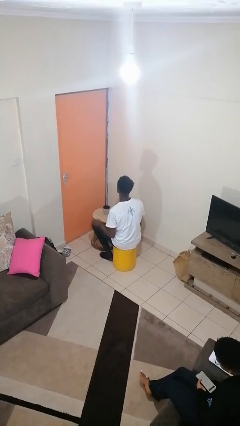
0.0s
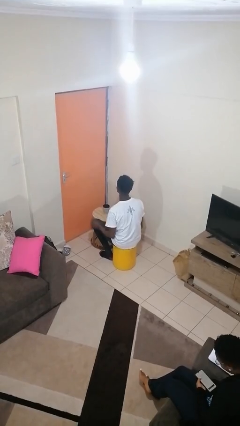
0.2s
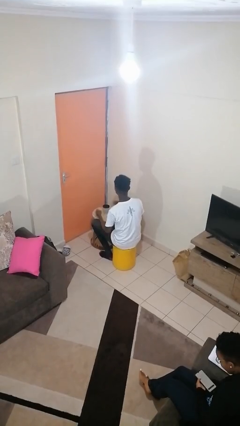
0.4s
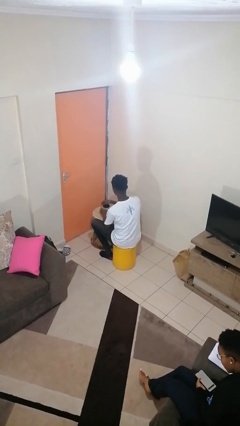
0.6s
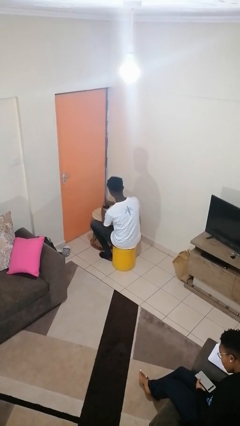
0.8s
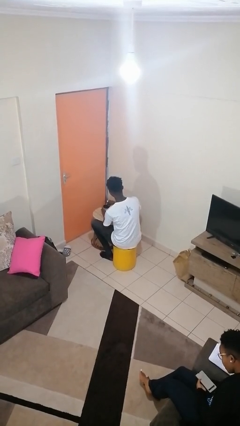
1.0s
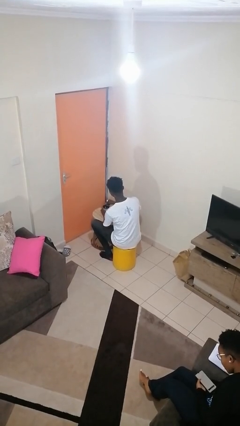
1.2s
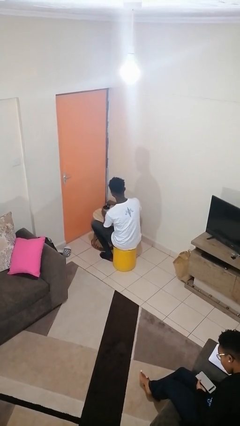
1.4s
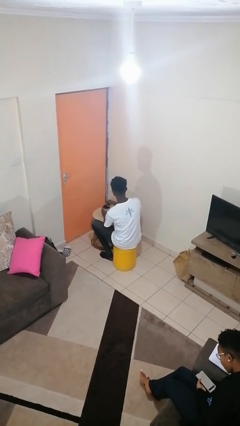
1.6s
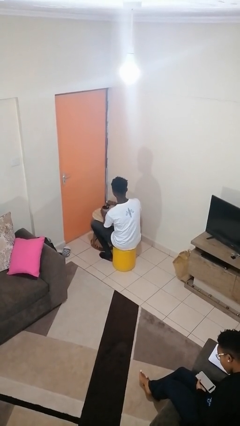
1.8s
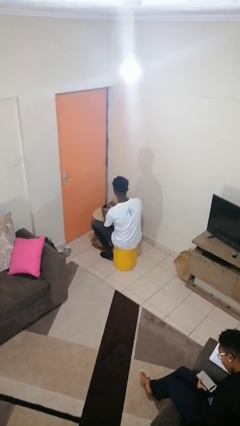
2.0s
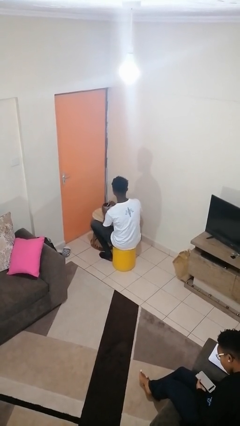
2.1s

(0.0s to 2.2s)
person stirs mug

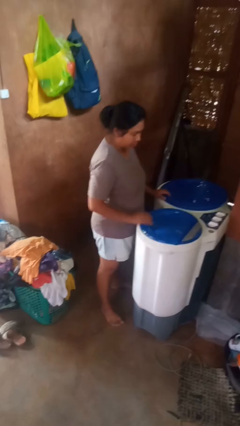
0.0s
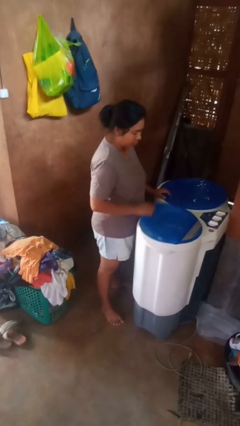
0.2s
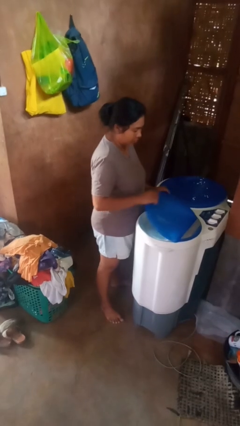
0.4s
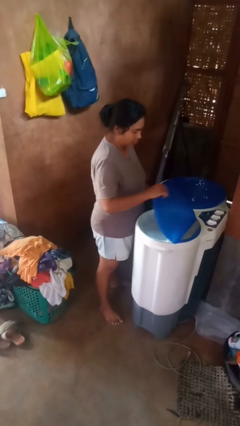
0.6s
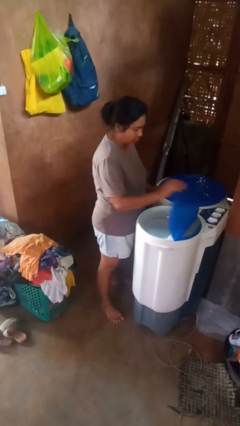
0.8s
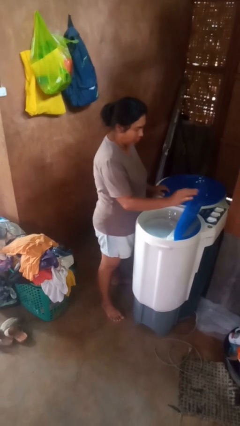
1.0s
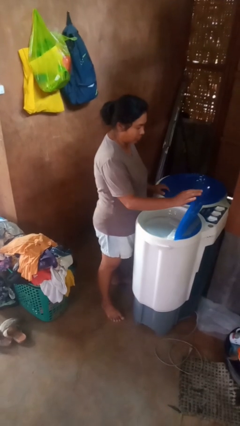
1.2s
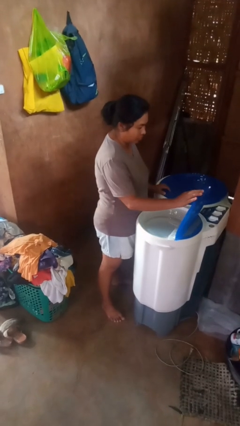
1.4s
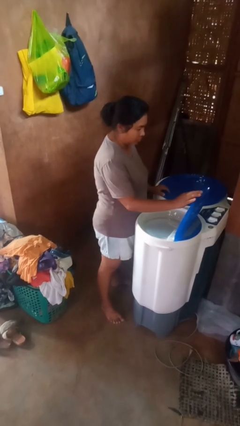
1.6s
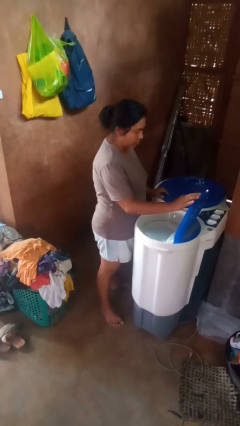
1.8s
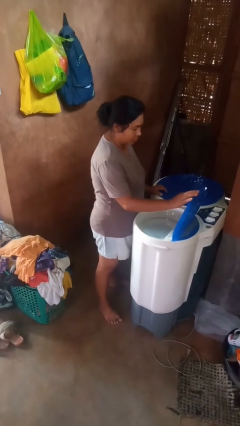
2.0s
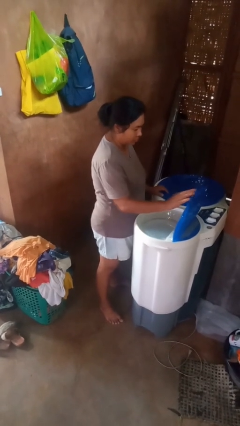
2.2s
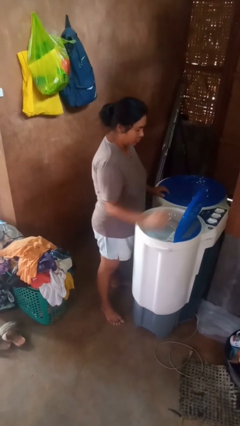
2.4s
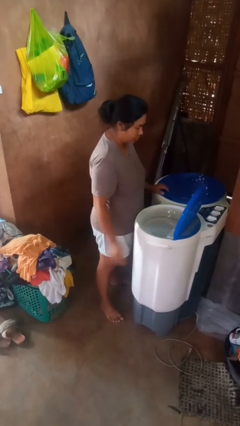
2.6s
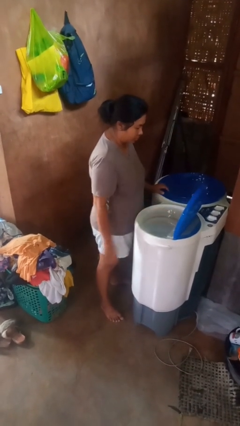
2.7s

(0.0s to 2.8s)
person opens clothes washer

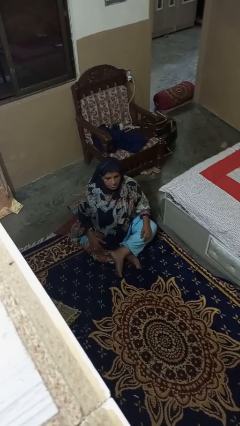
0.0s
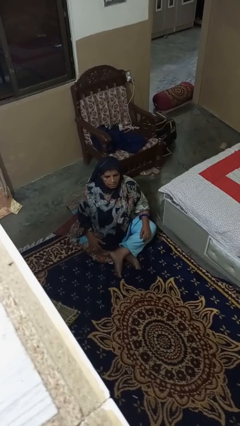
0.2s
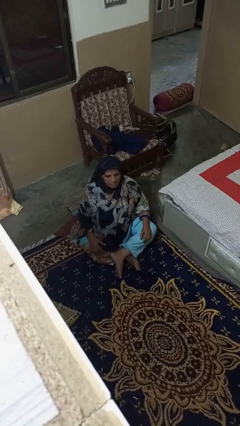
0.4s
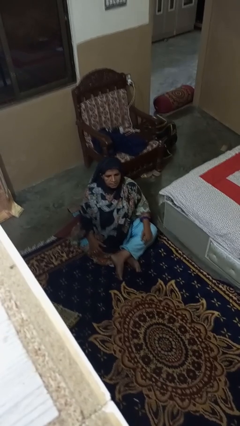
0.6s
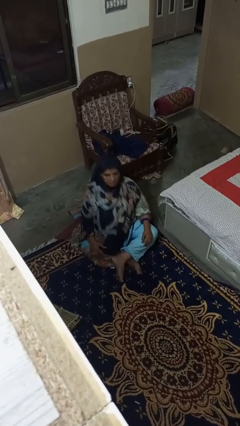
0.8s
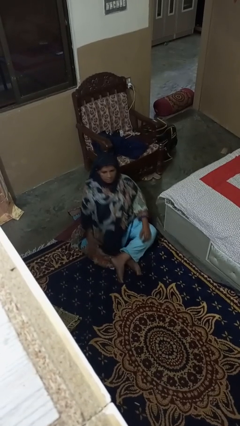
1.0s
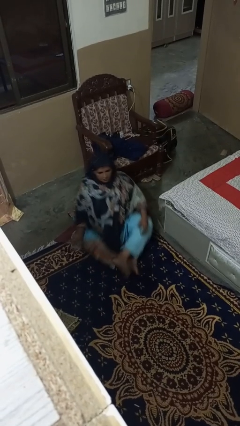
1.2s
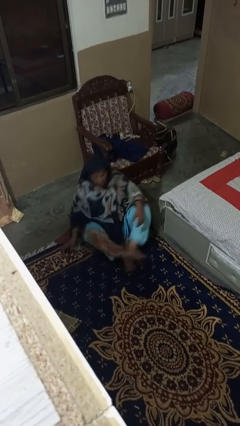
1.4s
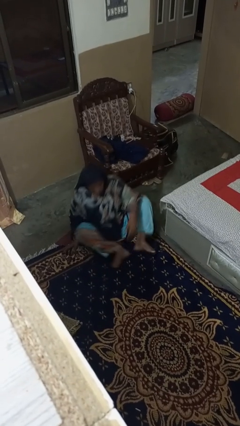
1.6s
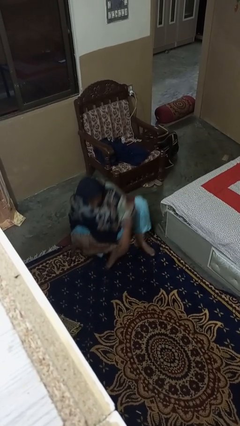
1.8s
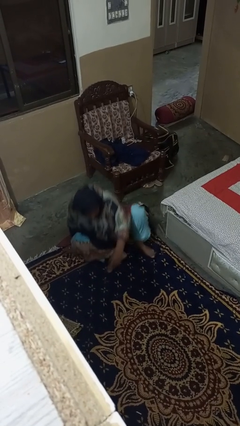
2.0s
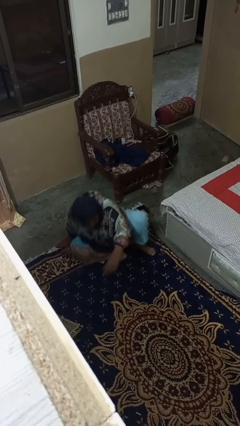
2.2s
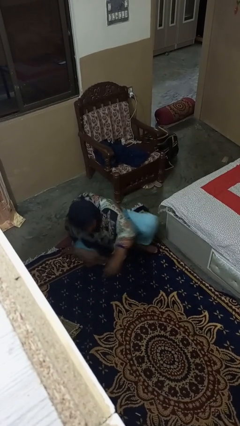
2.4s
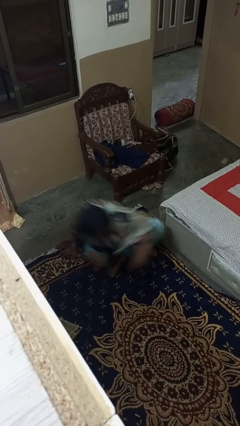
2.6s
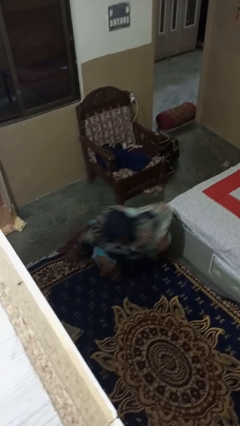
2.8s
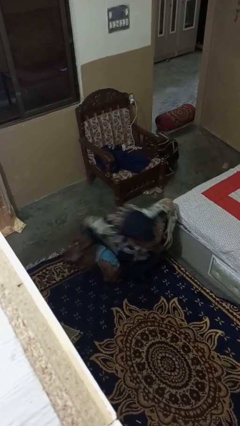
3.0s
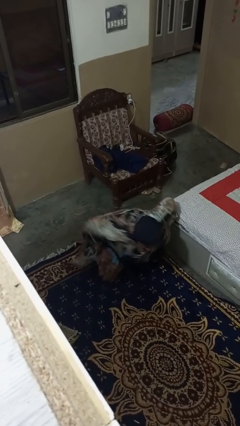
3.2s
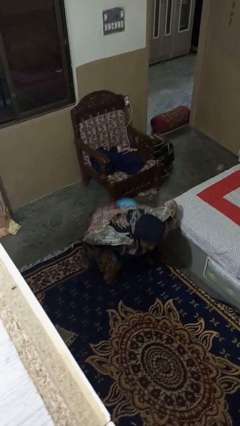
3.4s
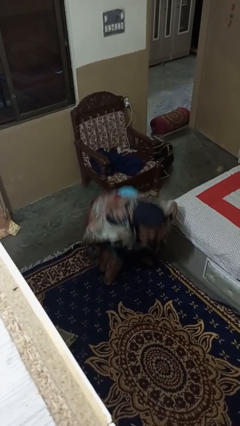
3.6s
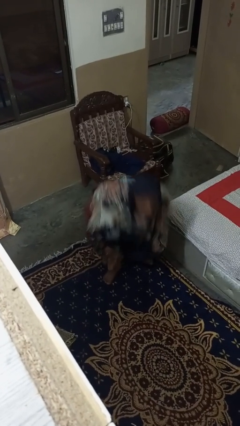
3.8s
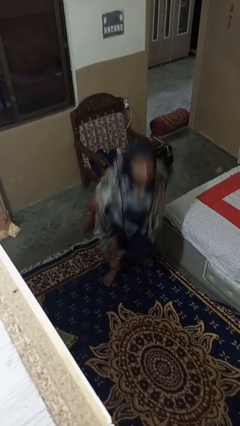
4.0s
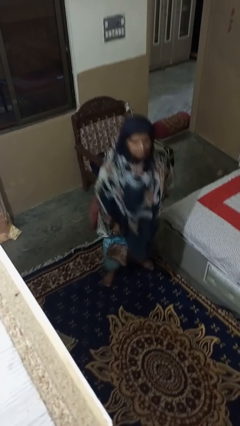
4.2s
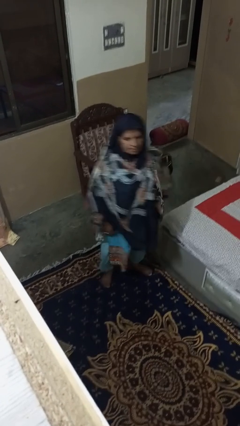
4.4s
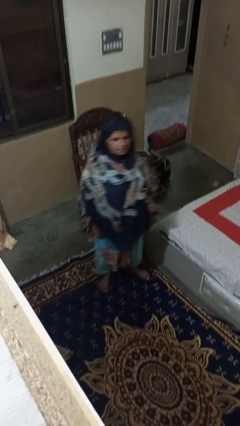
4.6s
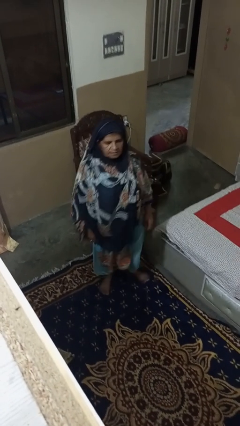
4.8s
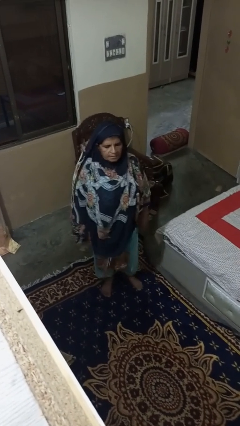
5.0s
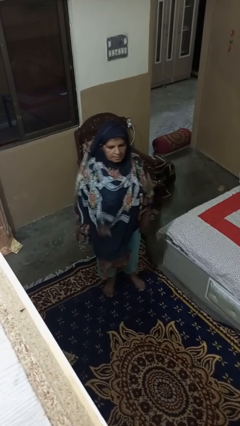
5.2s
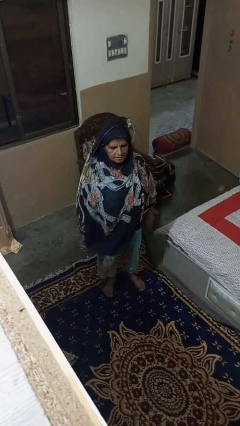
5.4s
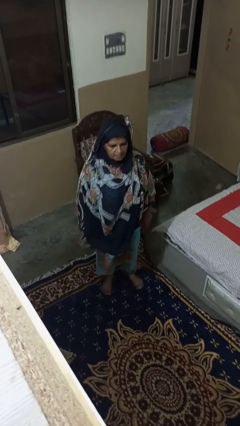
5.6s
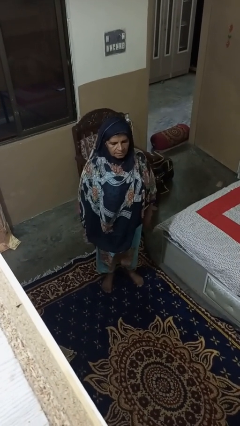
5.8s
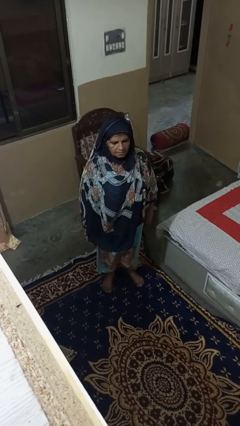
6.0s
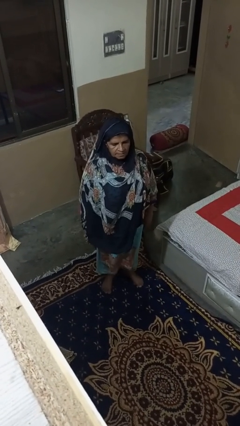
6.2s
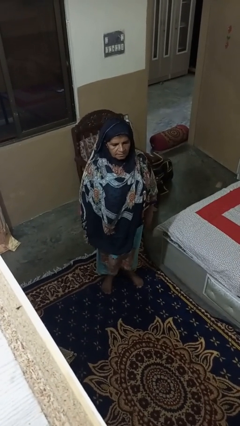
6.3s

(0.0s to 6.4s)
person stands up from floor

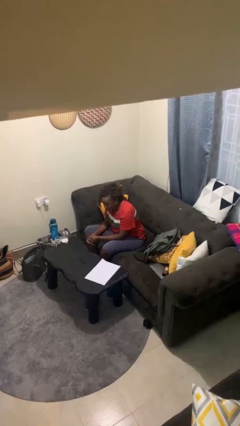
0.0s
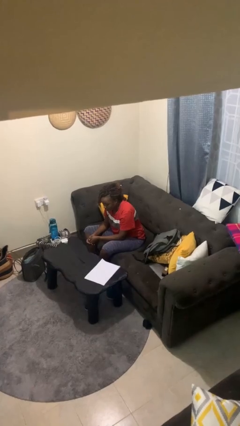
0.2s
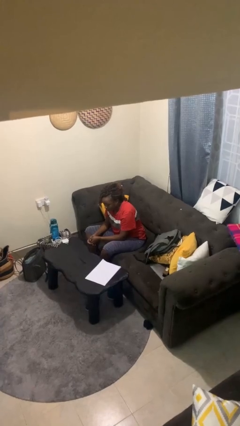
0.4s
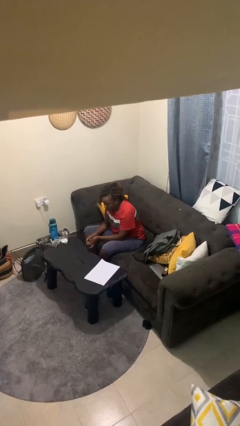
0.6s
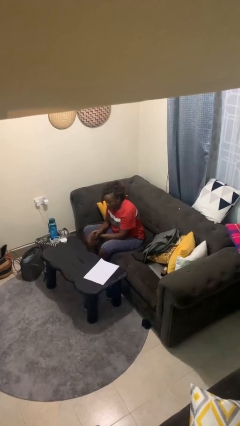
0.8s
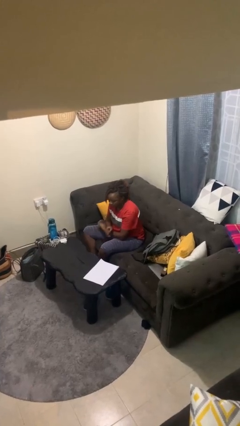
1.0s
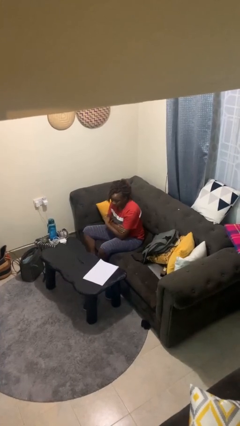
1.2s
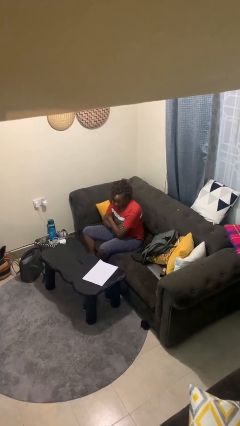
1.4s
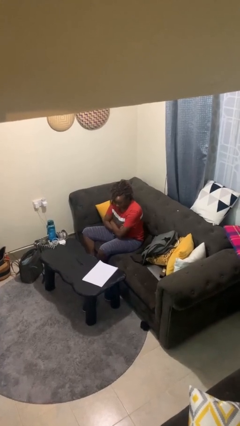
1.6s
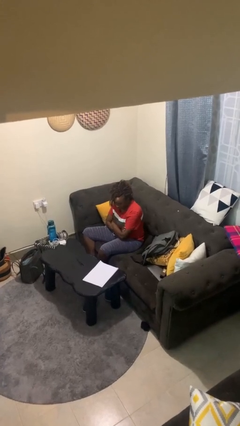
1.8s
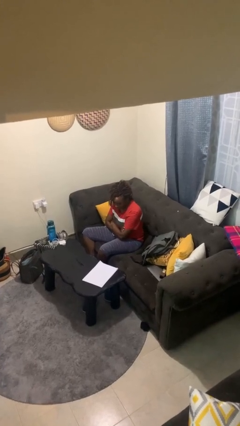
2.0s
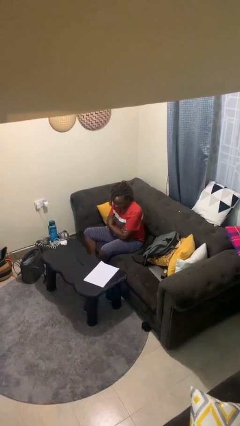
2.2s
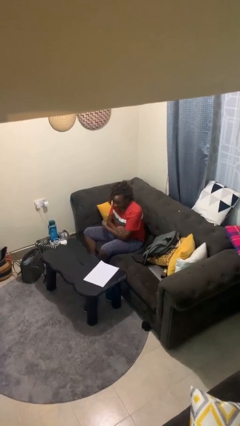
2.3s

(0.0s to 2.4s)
person crosses arms

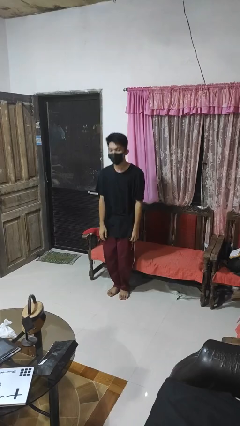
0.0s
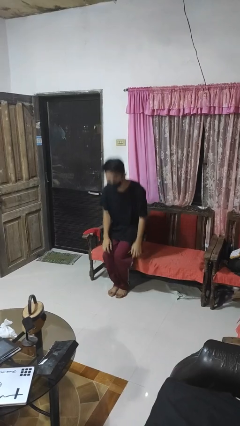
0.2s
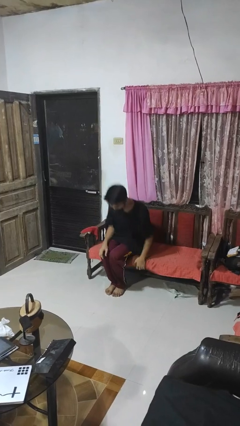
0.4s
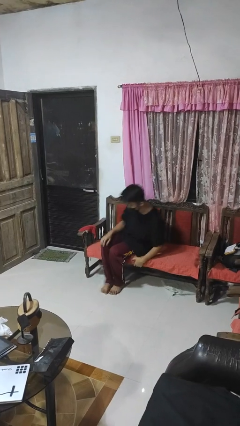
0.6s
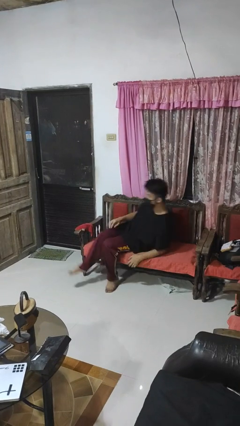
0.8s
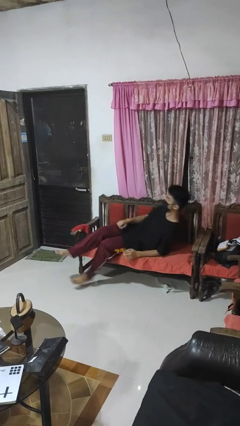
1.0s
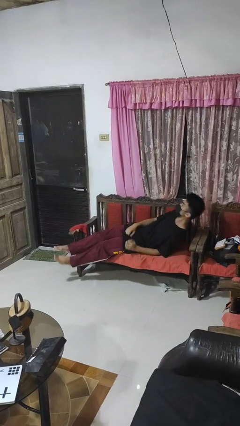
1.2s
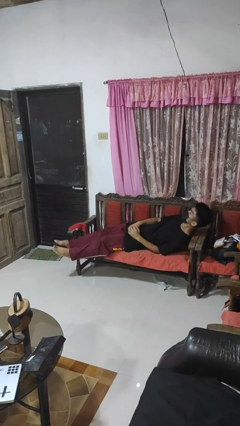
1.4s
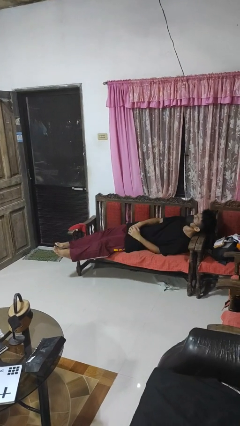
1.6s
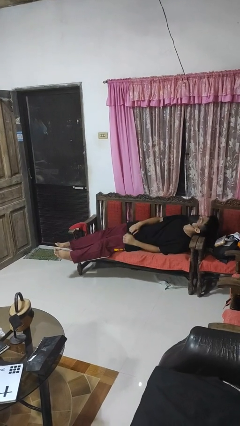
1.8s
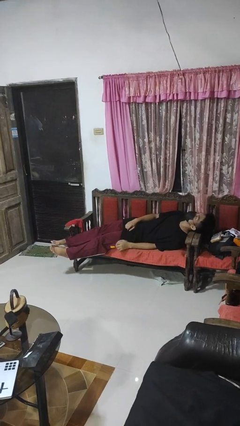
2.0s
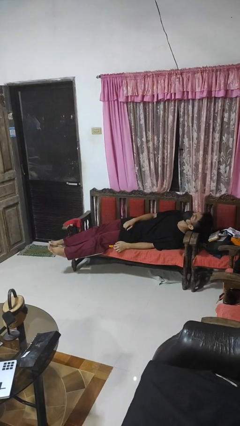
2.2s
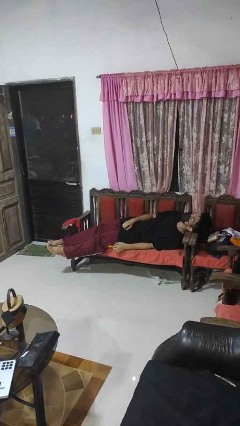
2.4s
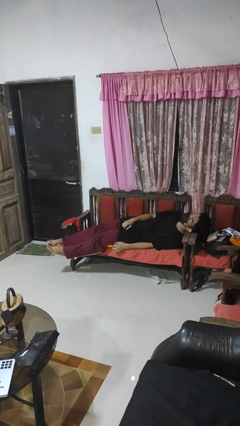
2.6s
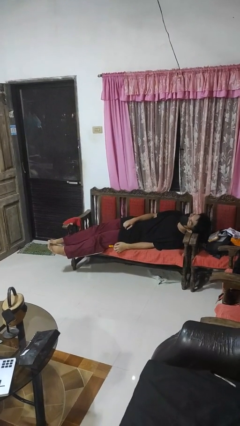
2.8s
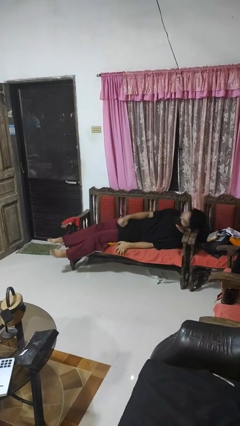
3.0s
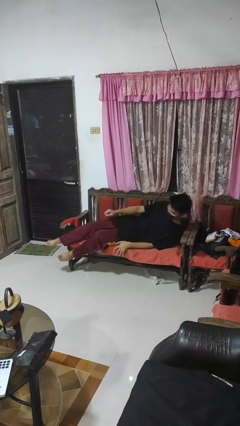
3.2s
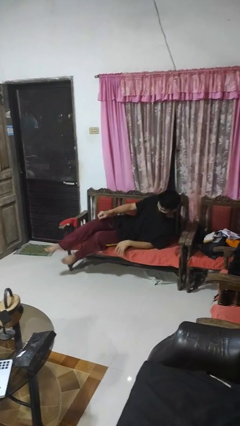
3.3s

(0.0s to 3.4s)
person lies down on couch

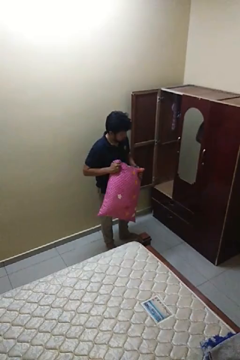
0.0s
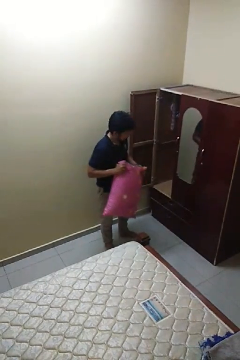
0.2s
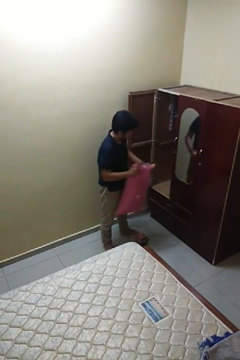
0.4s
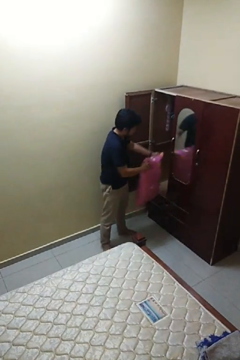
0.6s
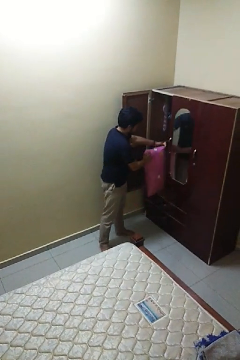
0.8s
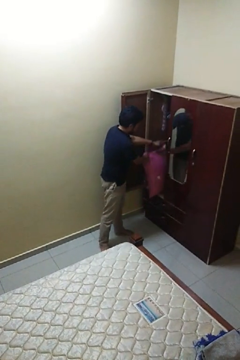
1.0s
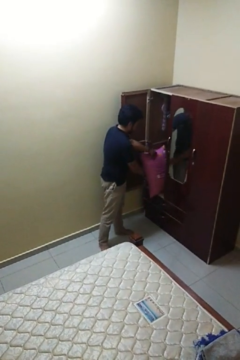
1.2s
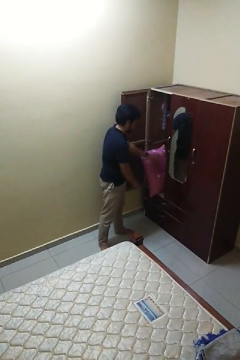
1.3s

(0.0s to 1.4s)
person puts down object into cabinet
